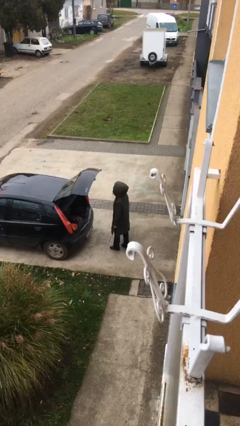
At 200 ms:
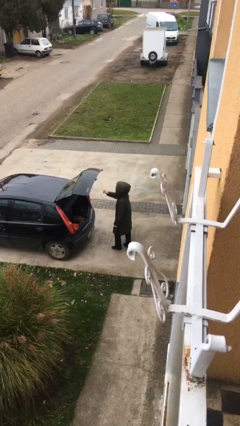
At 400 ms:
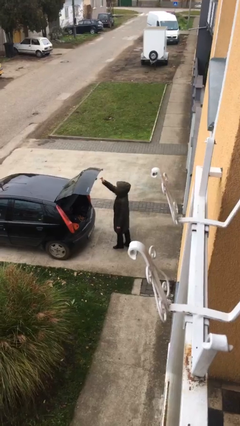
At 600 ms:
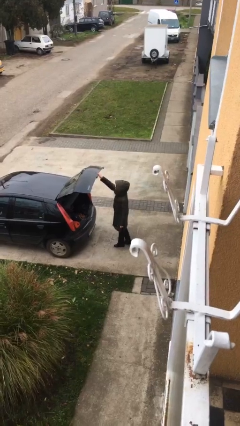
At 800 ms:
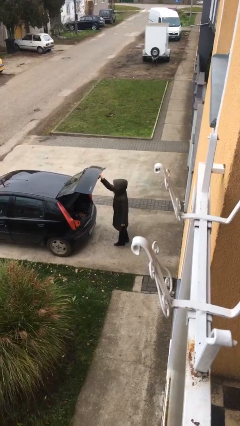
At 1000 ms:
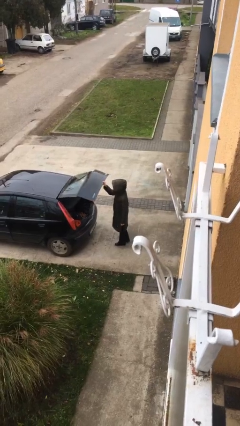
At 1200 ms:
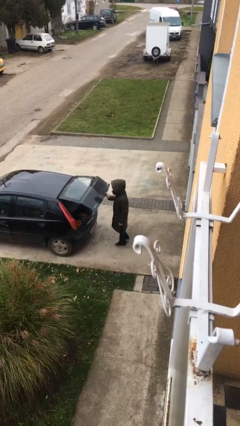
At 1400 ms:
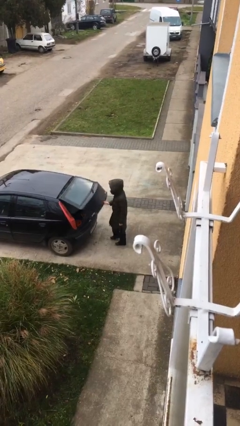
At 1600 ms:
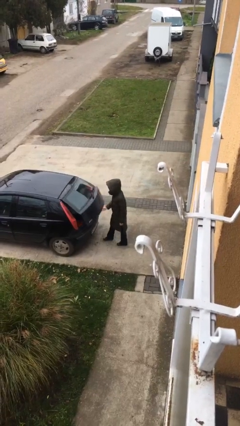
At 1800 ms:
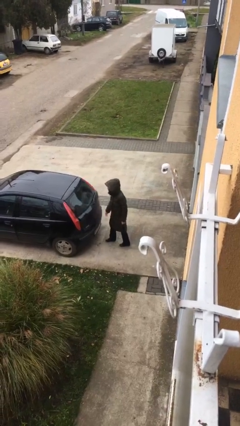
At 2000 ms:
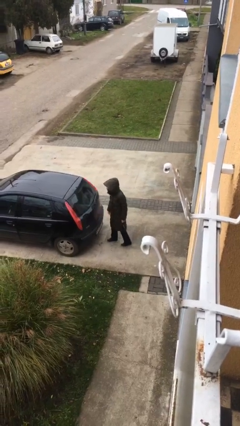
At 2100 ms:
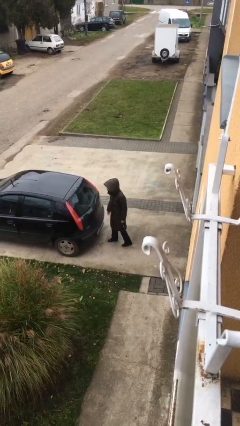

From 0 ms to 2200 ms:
person closes car trunk

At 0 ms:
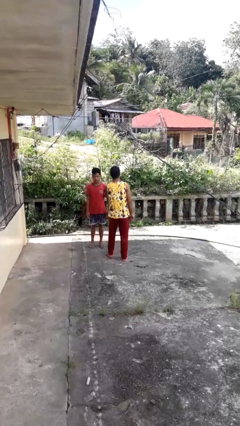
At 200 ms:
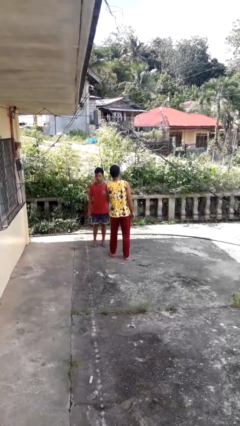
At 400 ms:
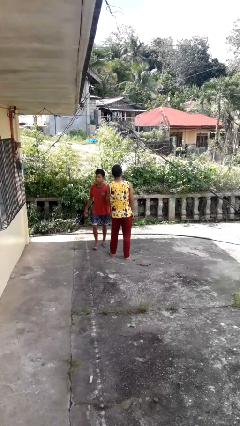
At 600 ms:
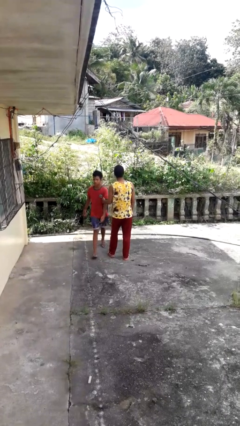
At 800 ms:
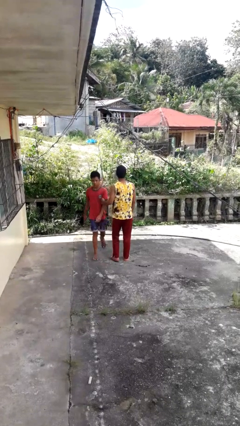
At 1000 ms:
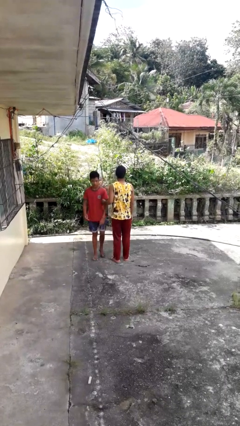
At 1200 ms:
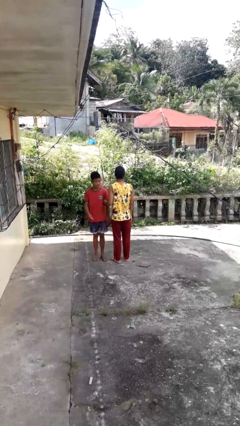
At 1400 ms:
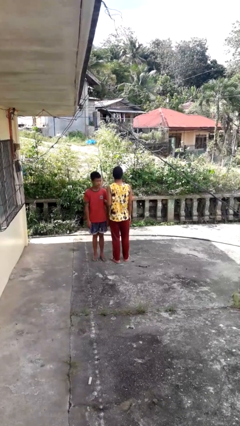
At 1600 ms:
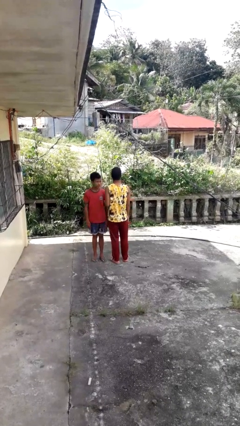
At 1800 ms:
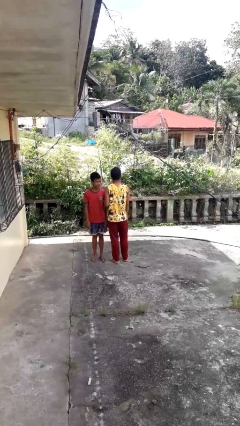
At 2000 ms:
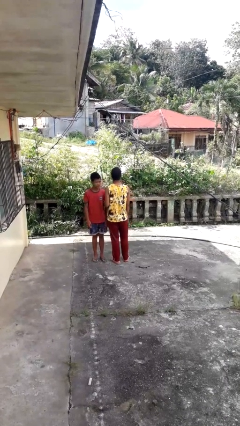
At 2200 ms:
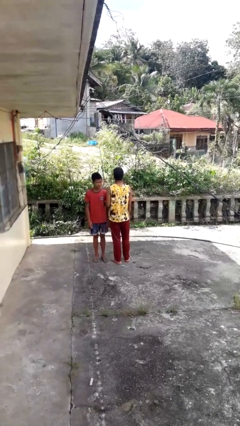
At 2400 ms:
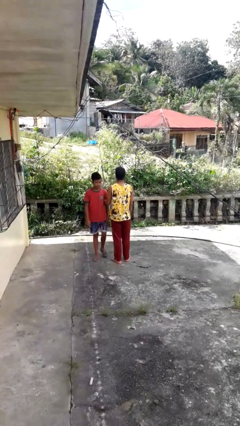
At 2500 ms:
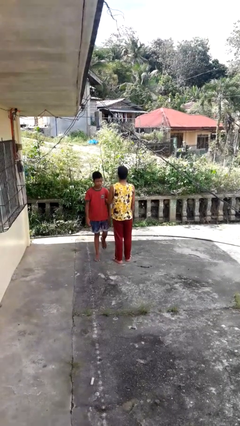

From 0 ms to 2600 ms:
person grabs person by bicep

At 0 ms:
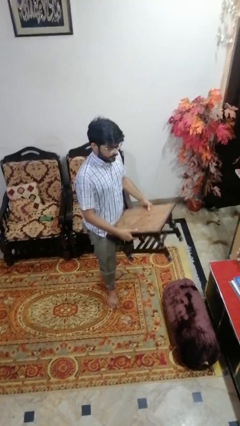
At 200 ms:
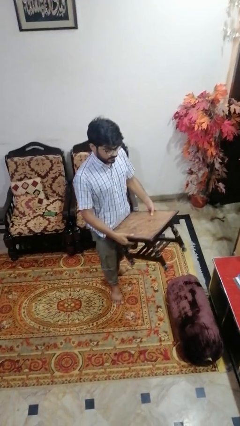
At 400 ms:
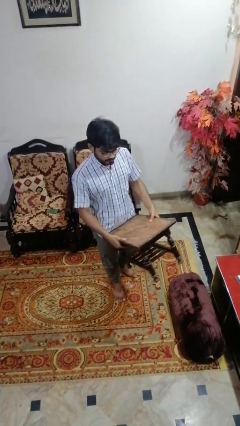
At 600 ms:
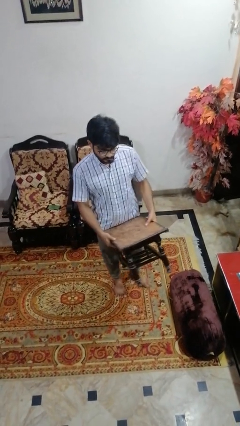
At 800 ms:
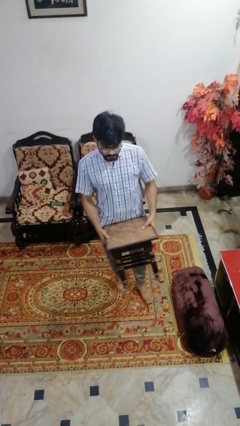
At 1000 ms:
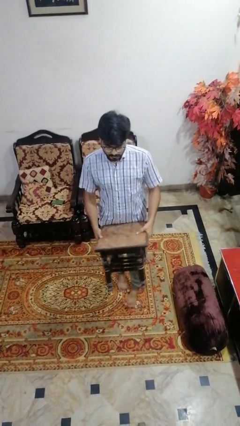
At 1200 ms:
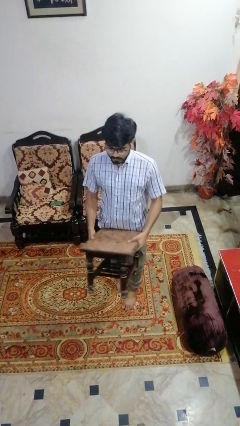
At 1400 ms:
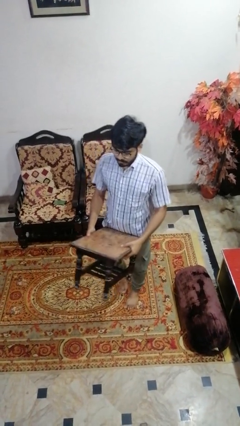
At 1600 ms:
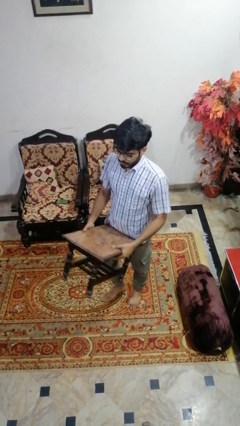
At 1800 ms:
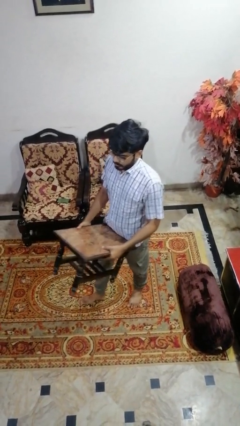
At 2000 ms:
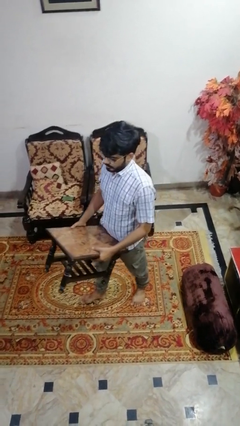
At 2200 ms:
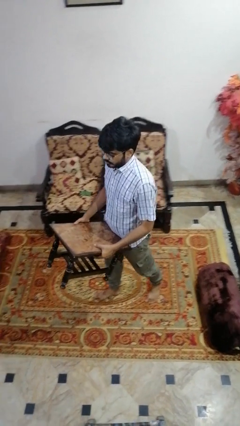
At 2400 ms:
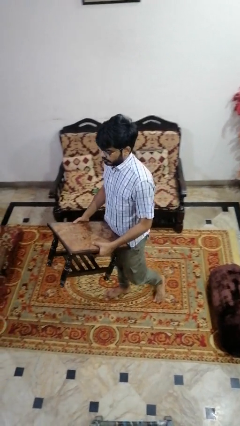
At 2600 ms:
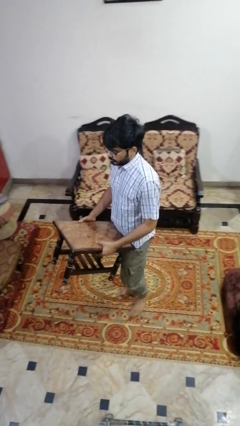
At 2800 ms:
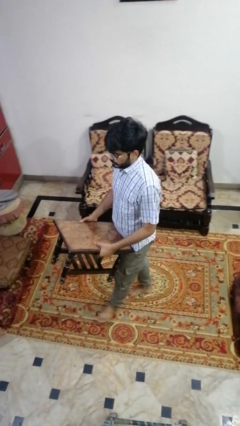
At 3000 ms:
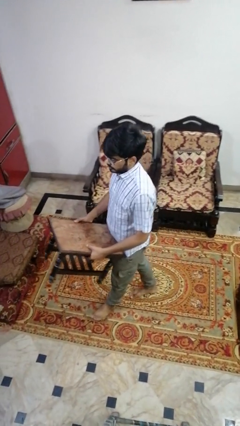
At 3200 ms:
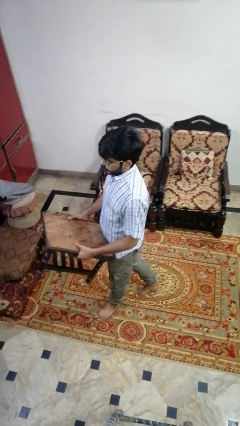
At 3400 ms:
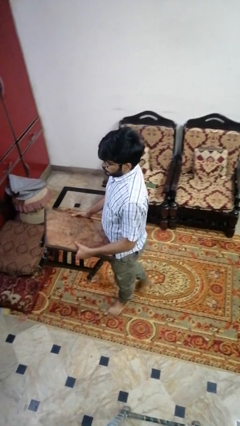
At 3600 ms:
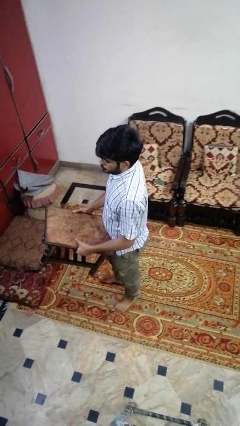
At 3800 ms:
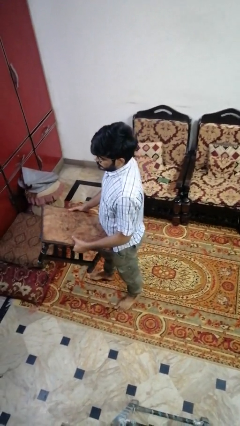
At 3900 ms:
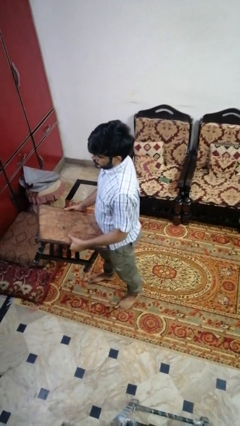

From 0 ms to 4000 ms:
person carries furniture

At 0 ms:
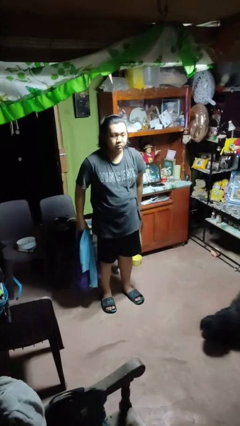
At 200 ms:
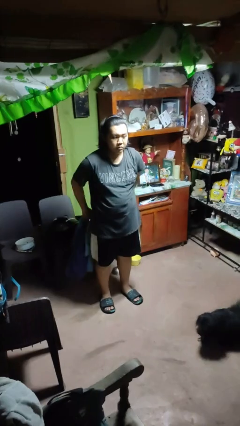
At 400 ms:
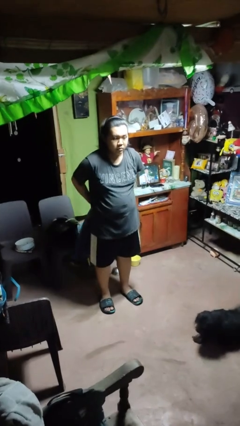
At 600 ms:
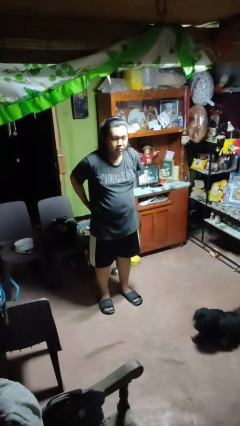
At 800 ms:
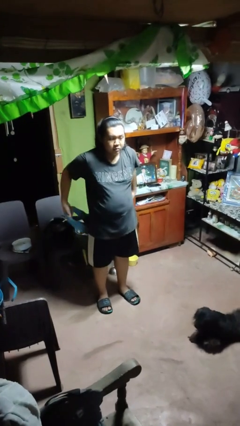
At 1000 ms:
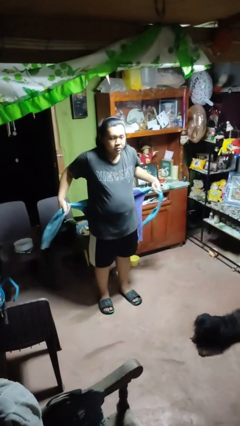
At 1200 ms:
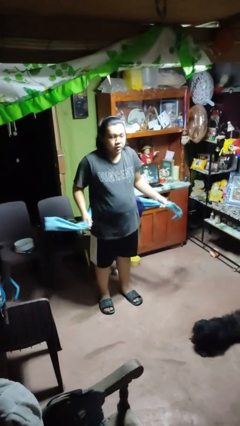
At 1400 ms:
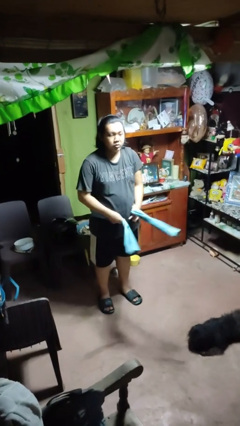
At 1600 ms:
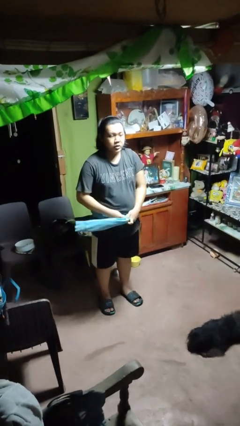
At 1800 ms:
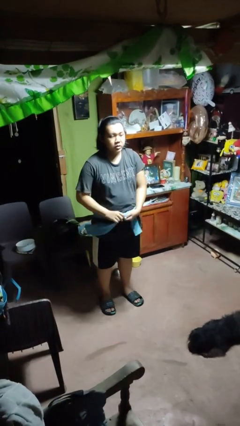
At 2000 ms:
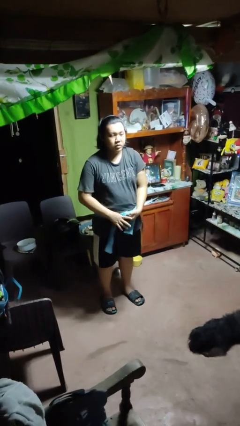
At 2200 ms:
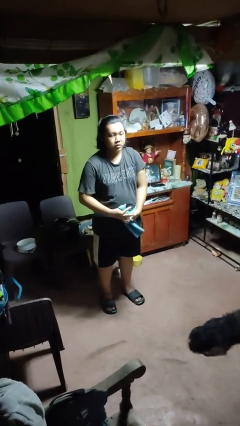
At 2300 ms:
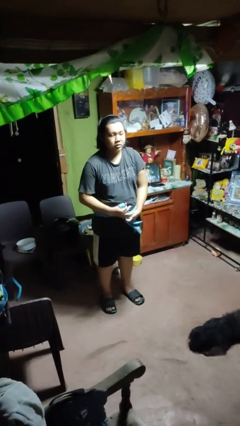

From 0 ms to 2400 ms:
person ties jacket around waist

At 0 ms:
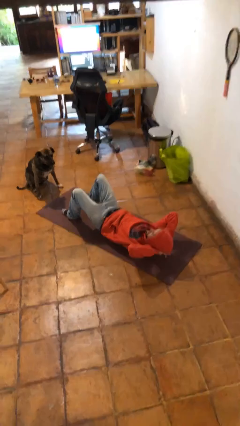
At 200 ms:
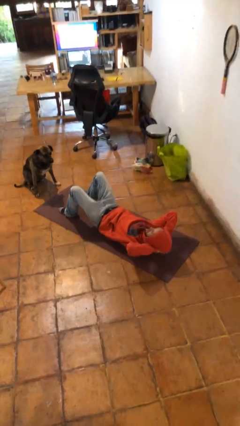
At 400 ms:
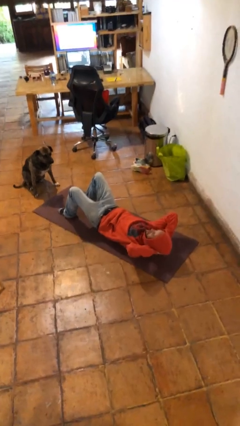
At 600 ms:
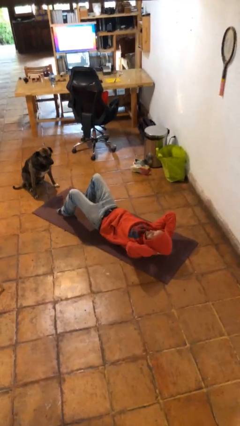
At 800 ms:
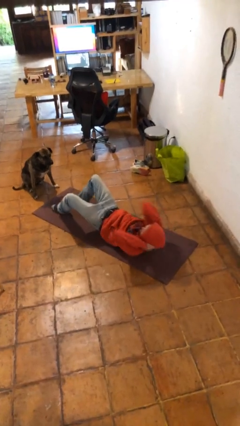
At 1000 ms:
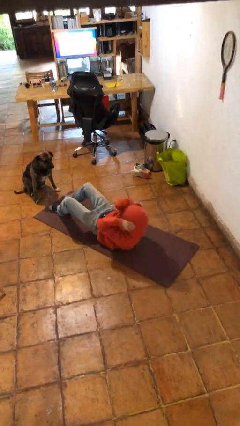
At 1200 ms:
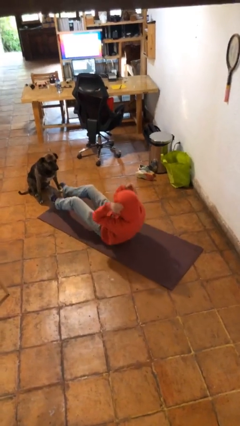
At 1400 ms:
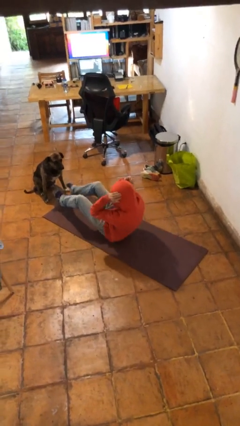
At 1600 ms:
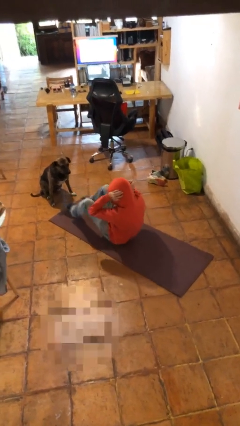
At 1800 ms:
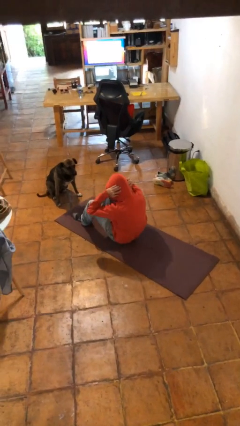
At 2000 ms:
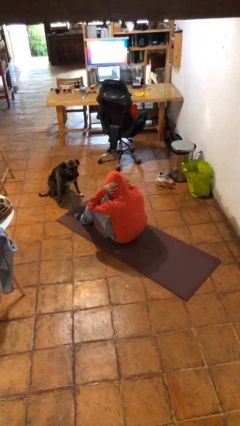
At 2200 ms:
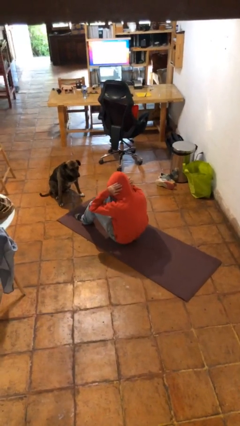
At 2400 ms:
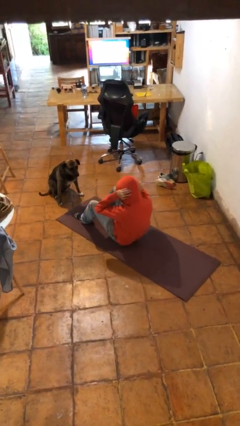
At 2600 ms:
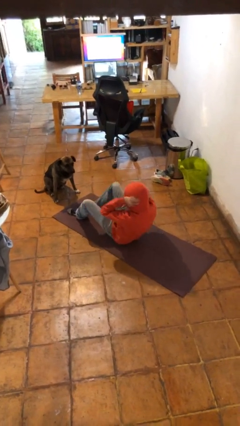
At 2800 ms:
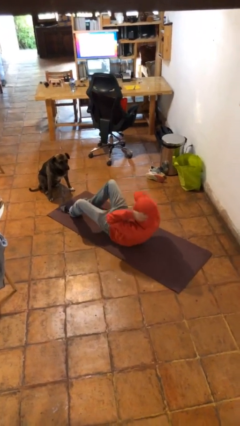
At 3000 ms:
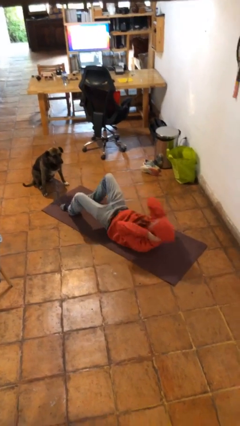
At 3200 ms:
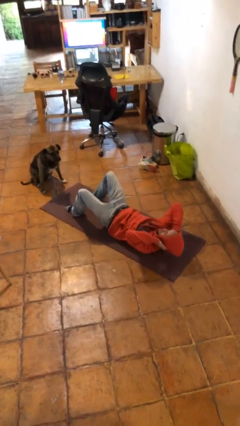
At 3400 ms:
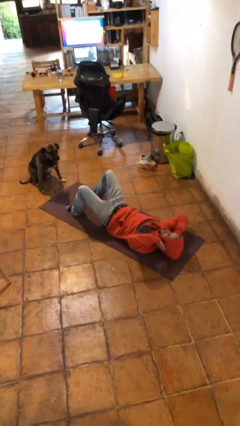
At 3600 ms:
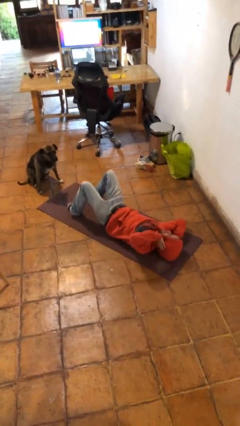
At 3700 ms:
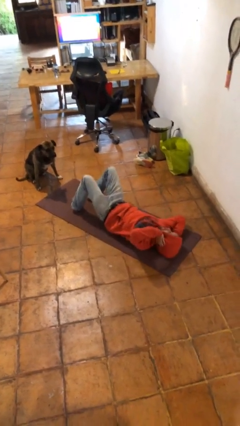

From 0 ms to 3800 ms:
person exercises with situp

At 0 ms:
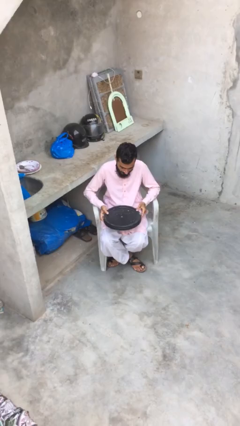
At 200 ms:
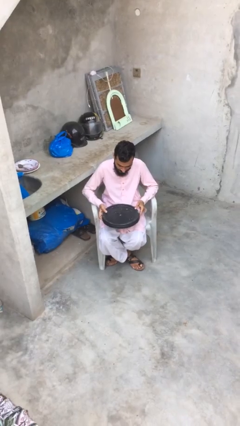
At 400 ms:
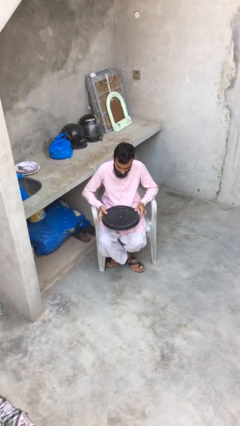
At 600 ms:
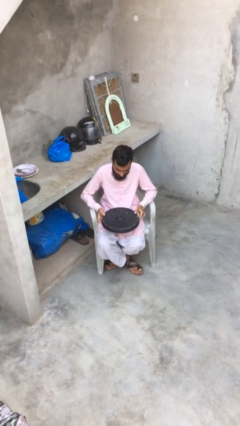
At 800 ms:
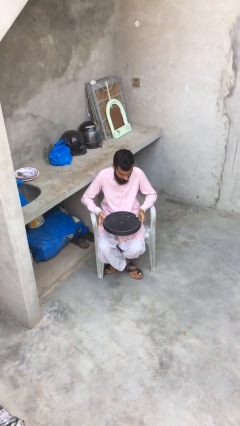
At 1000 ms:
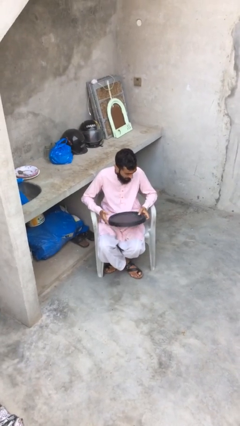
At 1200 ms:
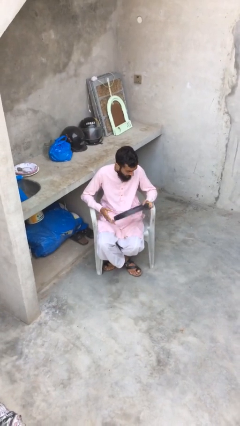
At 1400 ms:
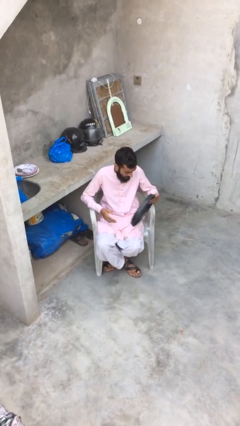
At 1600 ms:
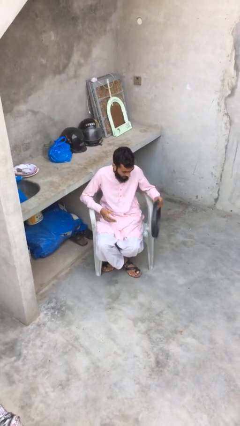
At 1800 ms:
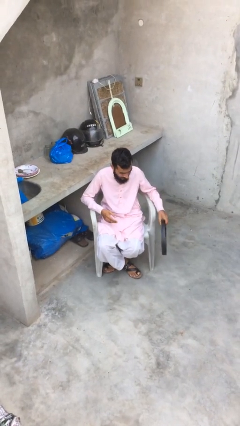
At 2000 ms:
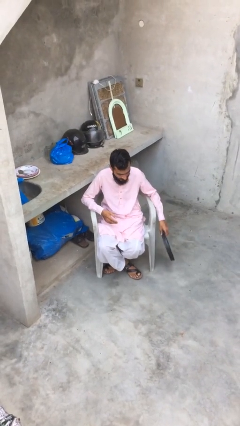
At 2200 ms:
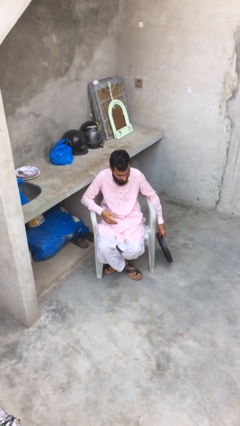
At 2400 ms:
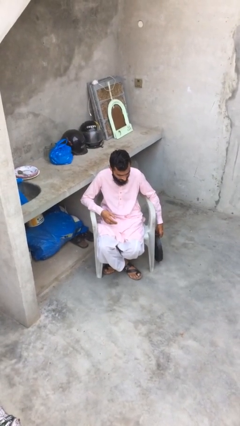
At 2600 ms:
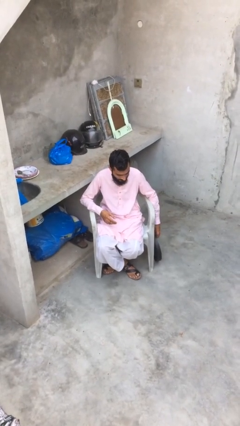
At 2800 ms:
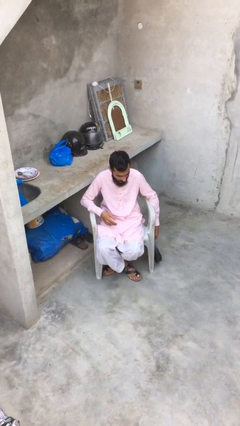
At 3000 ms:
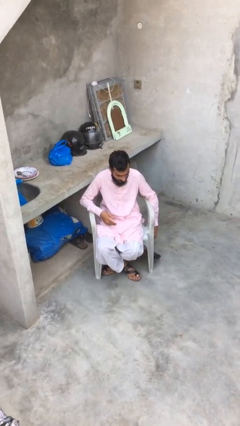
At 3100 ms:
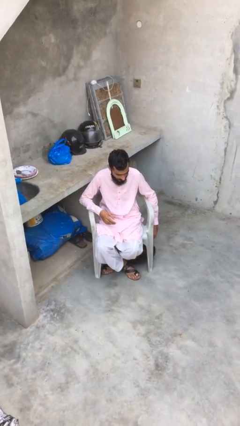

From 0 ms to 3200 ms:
person puts down object on floor
